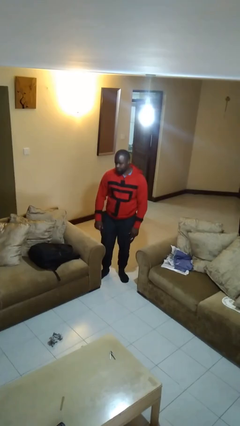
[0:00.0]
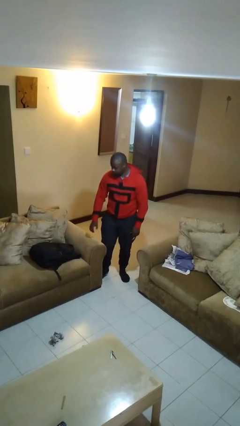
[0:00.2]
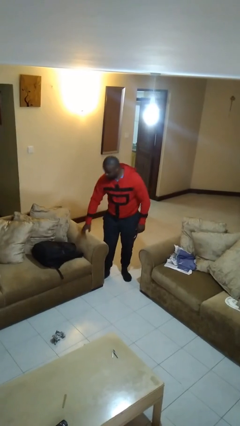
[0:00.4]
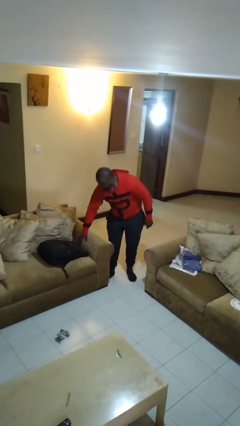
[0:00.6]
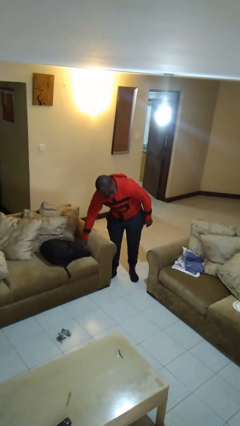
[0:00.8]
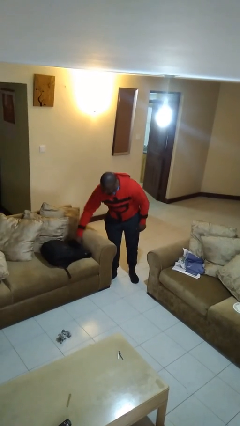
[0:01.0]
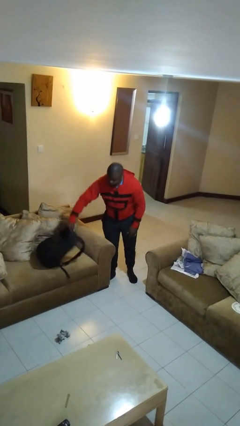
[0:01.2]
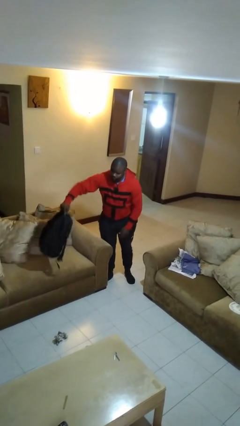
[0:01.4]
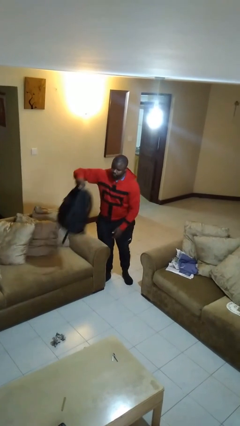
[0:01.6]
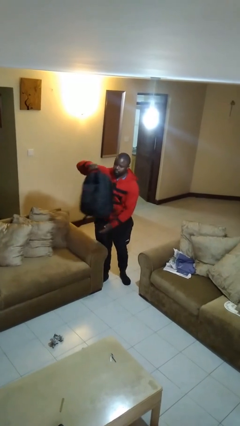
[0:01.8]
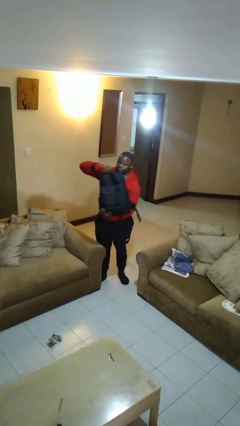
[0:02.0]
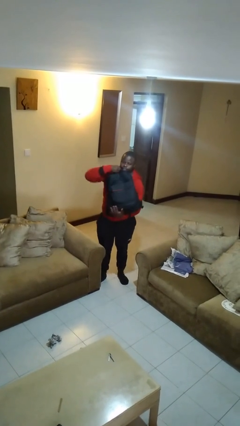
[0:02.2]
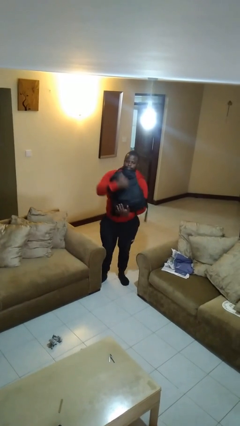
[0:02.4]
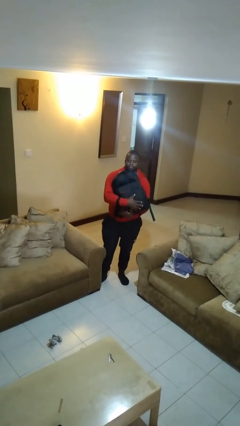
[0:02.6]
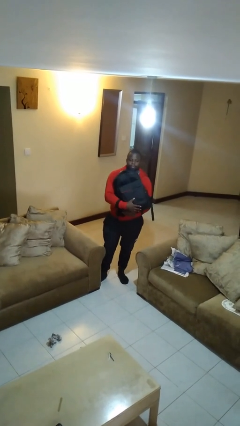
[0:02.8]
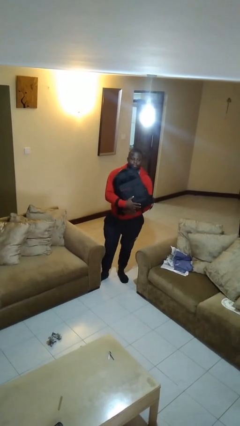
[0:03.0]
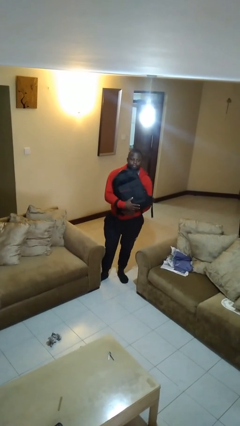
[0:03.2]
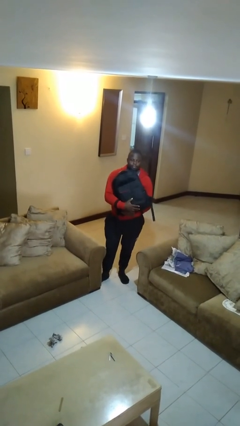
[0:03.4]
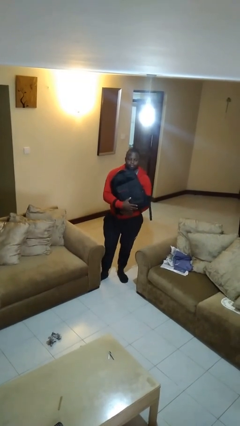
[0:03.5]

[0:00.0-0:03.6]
person picks up object from couch

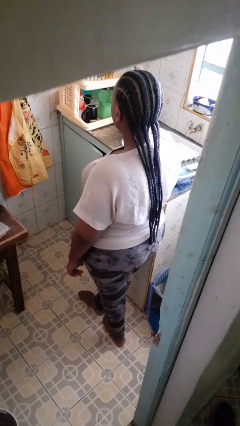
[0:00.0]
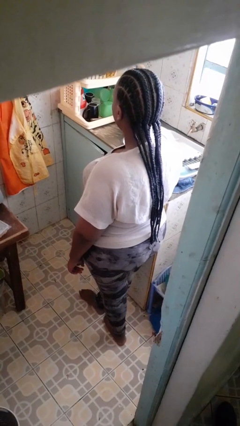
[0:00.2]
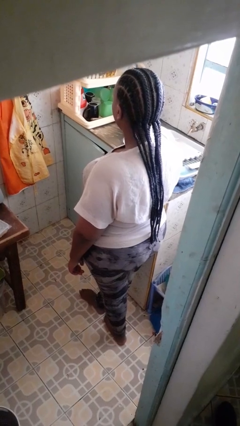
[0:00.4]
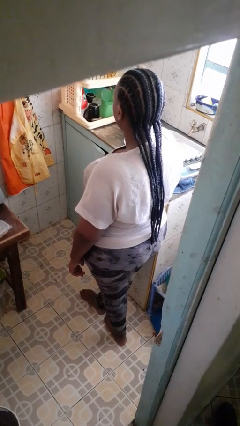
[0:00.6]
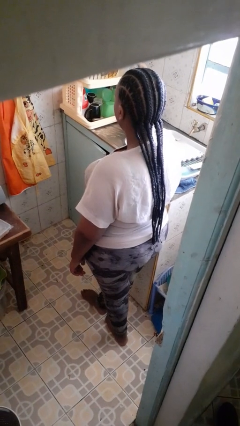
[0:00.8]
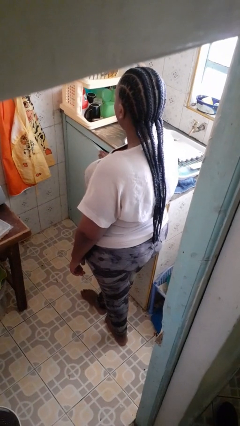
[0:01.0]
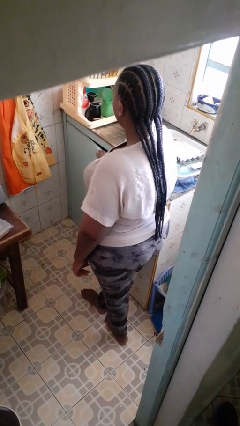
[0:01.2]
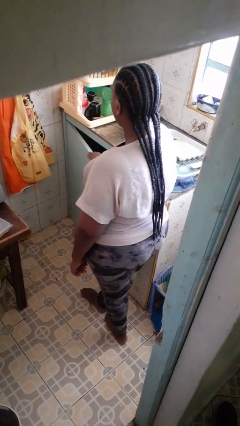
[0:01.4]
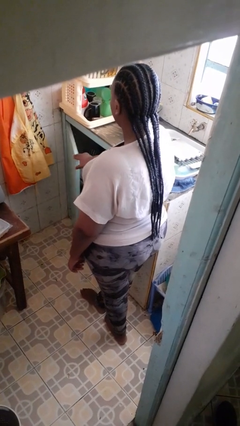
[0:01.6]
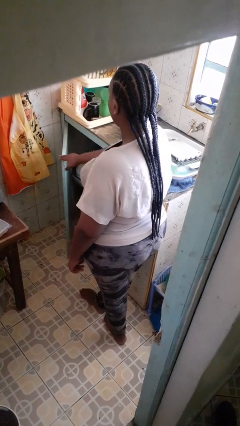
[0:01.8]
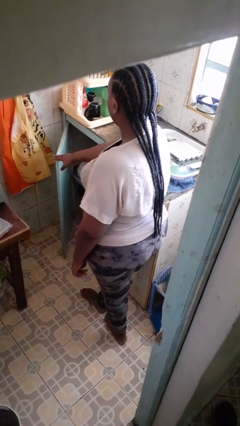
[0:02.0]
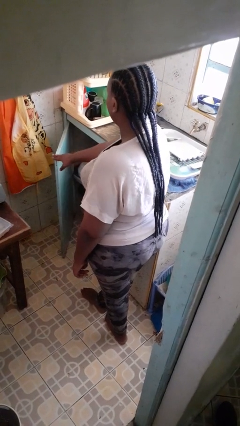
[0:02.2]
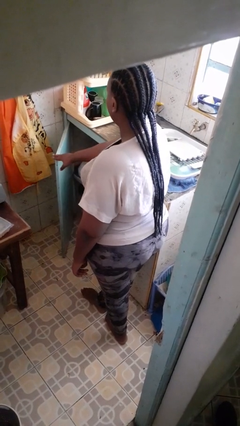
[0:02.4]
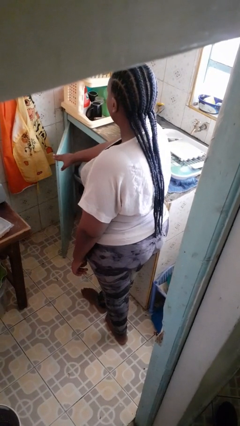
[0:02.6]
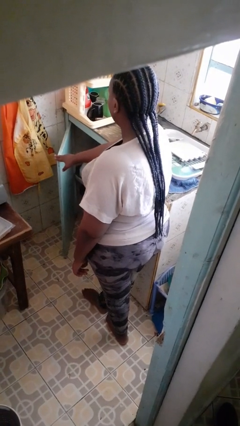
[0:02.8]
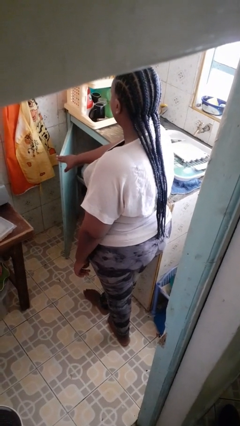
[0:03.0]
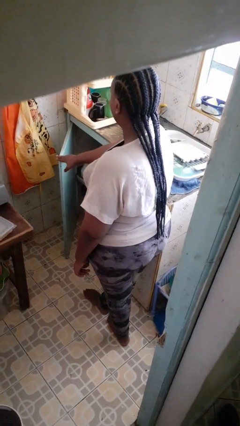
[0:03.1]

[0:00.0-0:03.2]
person opens cabinet

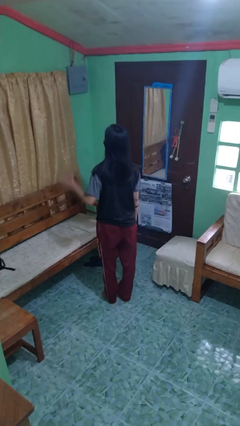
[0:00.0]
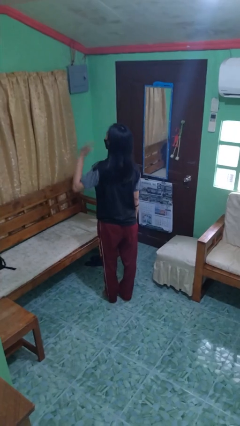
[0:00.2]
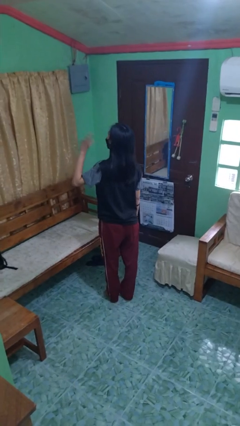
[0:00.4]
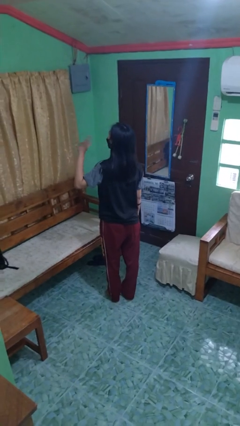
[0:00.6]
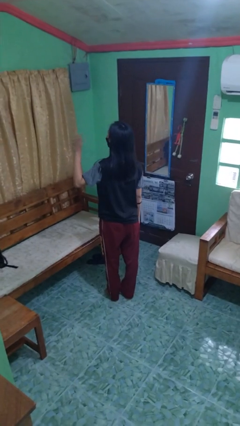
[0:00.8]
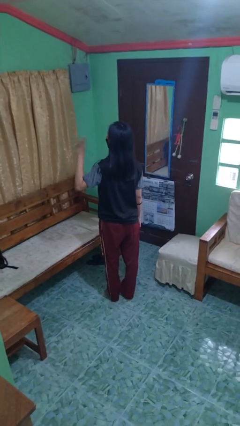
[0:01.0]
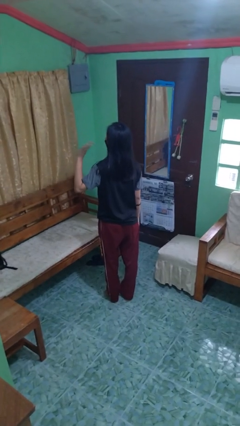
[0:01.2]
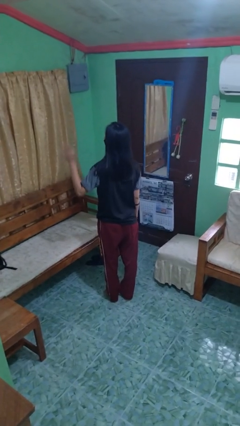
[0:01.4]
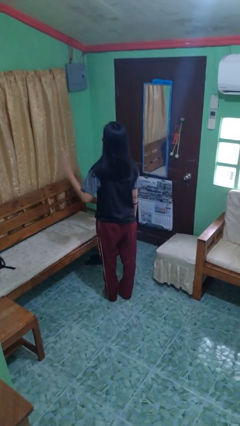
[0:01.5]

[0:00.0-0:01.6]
person waves at person

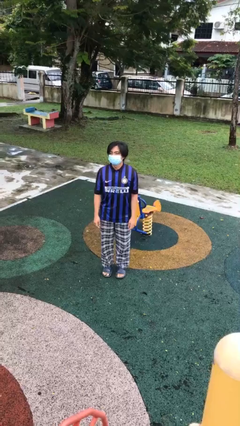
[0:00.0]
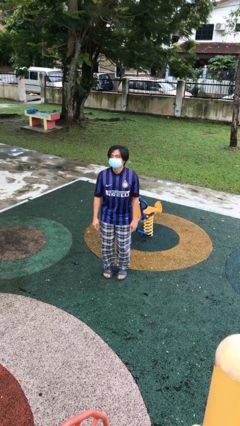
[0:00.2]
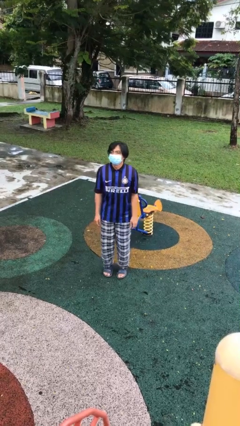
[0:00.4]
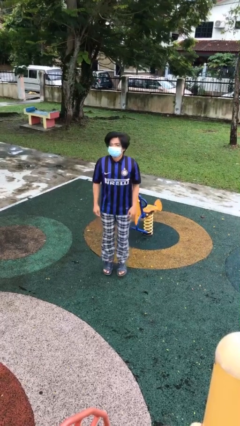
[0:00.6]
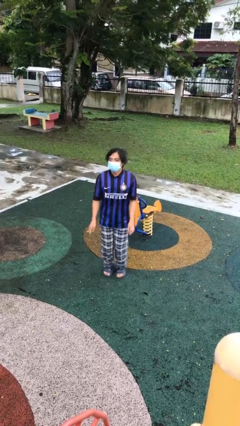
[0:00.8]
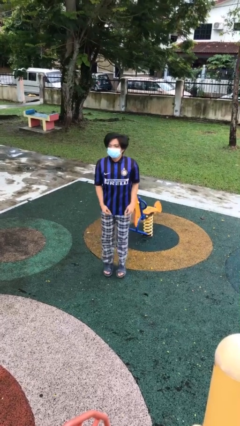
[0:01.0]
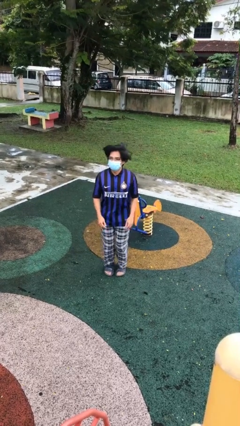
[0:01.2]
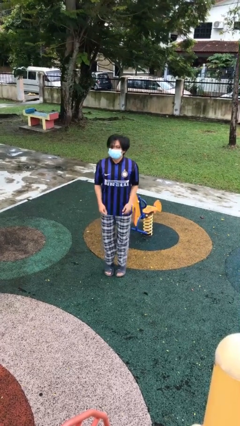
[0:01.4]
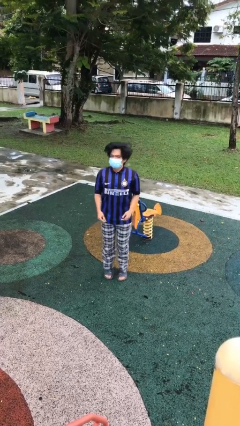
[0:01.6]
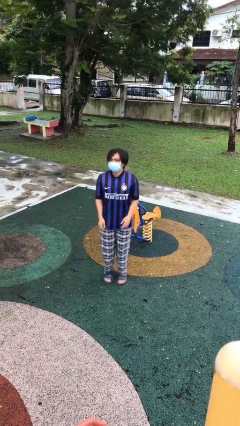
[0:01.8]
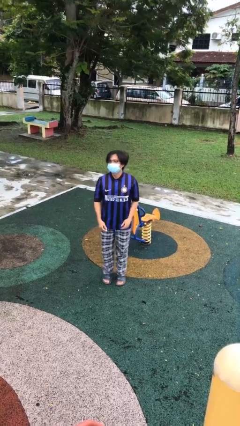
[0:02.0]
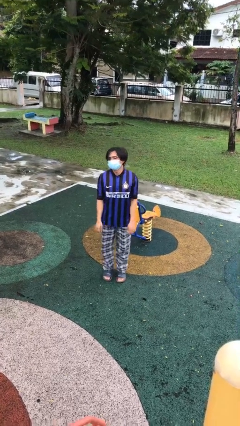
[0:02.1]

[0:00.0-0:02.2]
person jumps

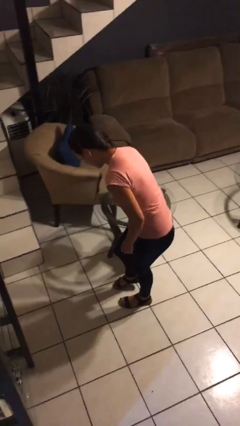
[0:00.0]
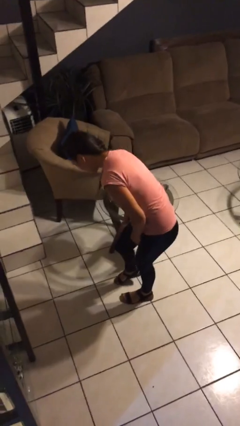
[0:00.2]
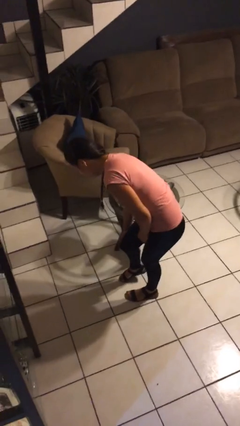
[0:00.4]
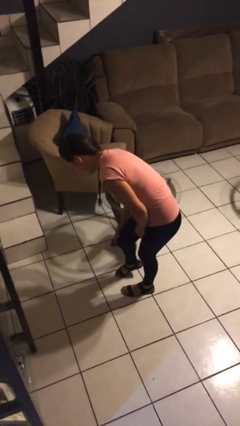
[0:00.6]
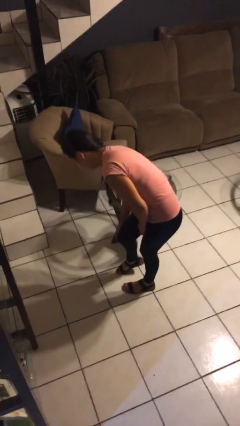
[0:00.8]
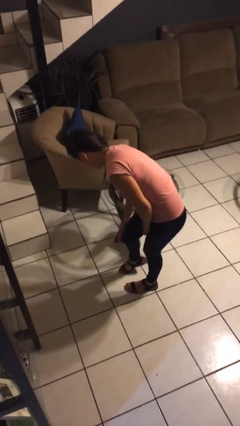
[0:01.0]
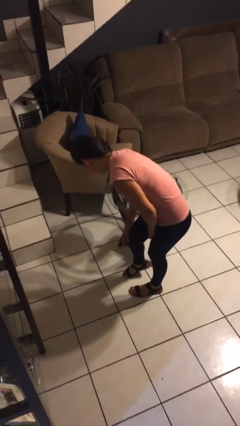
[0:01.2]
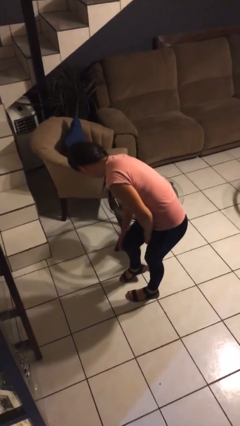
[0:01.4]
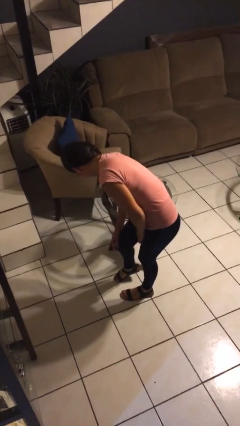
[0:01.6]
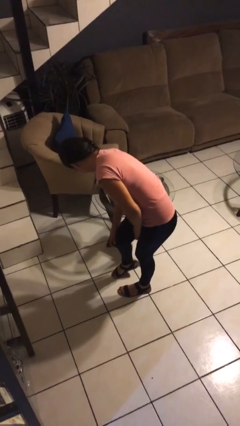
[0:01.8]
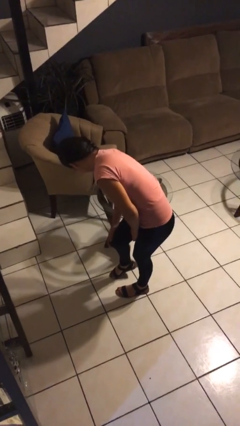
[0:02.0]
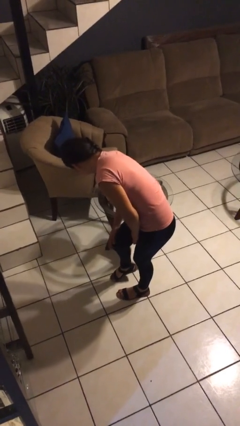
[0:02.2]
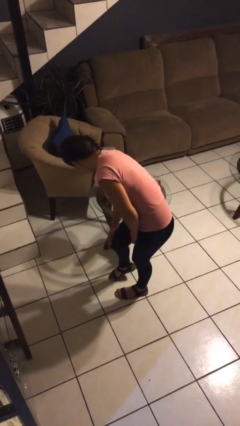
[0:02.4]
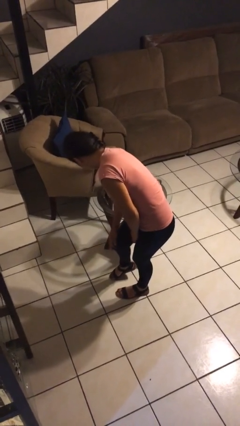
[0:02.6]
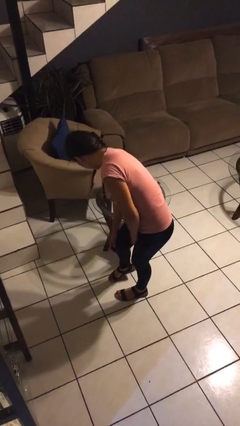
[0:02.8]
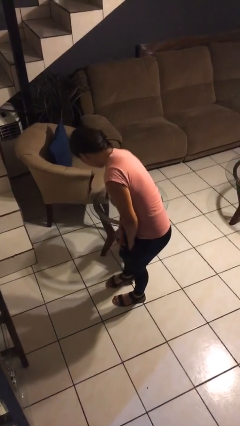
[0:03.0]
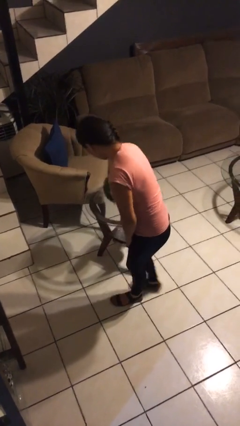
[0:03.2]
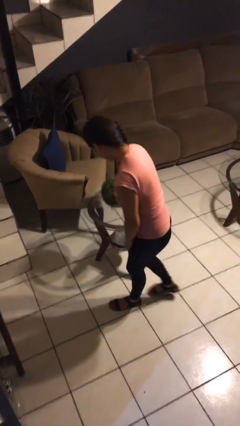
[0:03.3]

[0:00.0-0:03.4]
person bumps into table

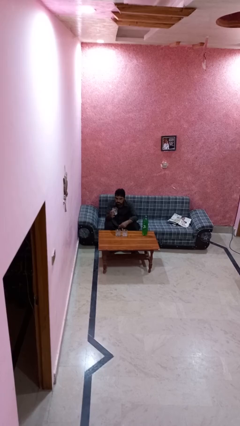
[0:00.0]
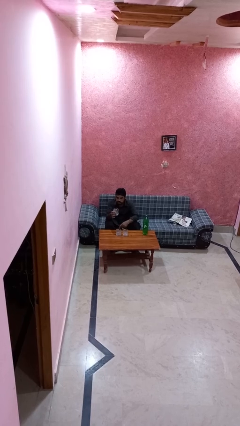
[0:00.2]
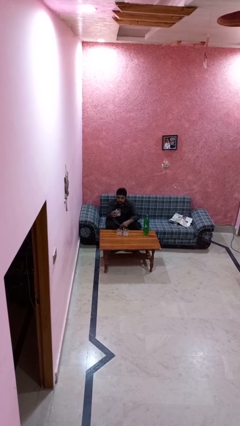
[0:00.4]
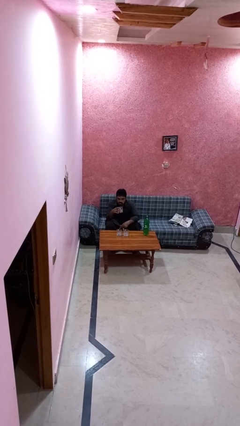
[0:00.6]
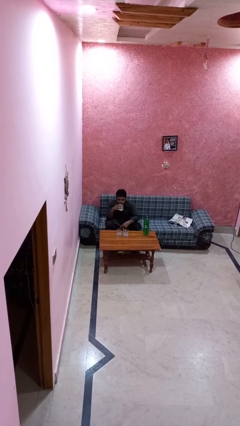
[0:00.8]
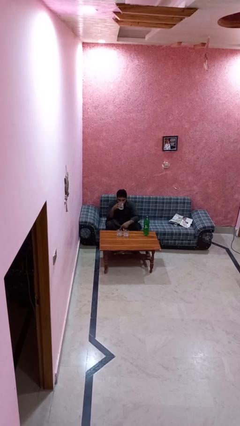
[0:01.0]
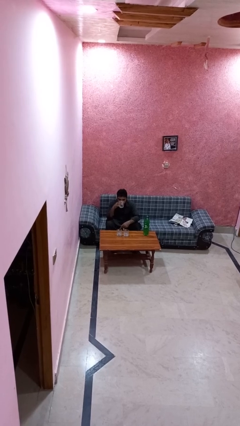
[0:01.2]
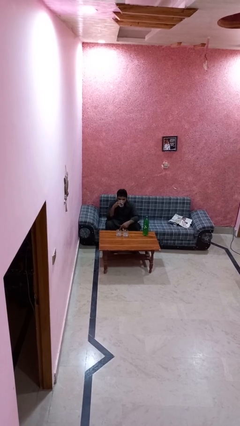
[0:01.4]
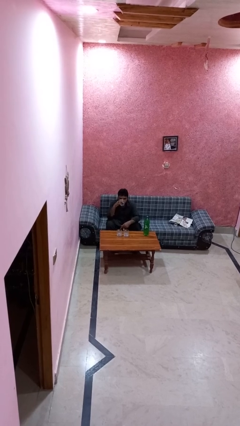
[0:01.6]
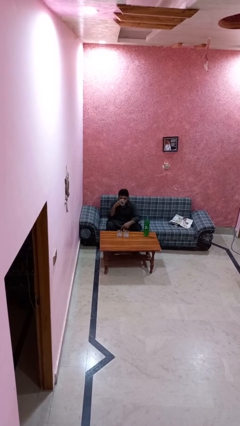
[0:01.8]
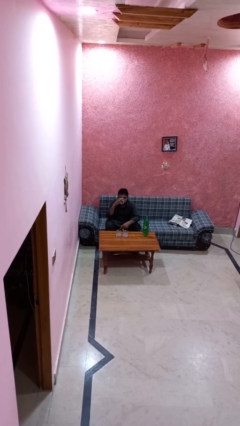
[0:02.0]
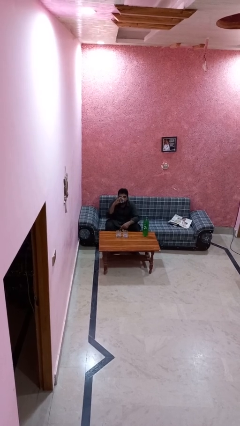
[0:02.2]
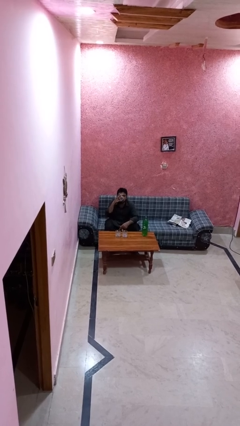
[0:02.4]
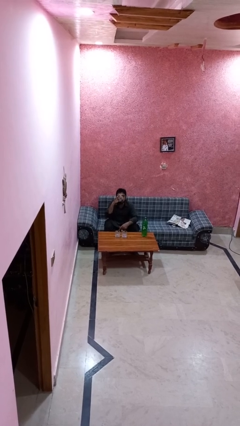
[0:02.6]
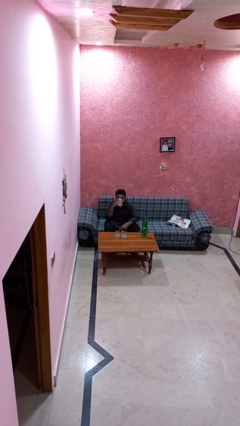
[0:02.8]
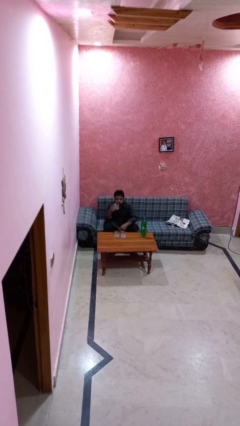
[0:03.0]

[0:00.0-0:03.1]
person drinks from shotglass

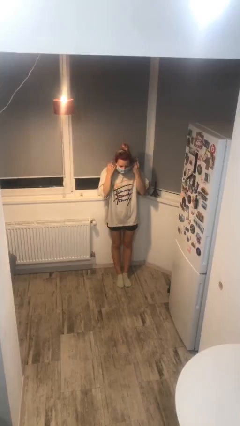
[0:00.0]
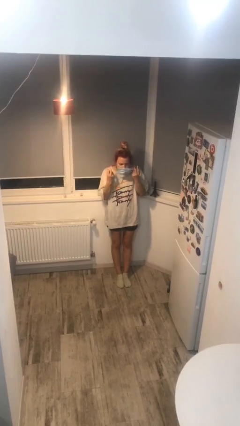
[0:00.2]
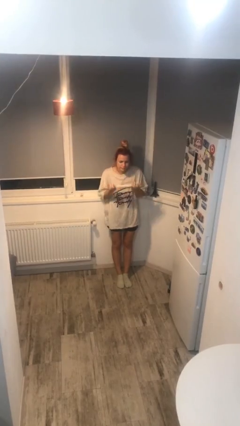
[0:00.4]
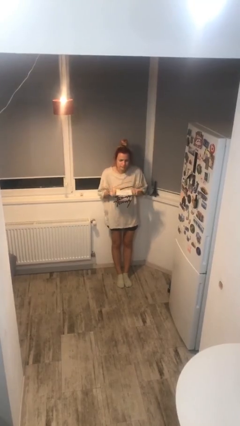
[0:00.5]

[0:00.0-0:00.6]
person takes off facemask
